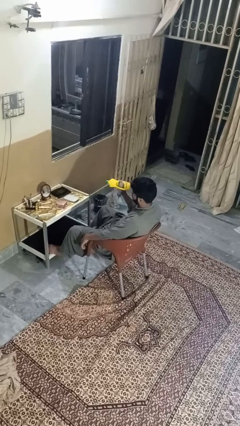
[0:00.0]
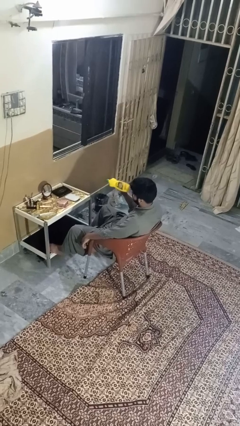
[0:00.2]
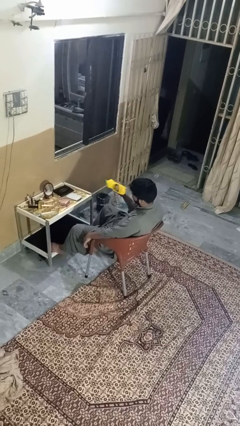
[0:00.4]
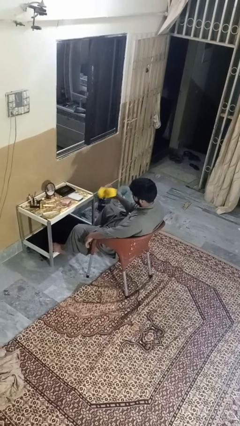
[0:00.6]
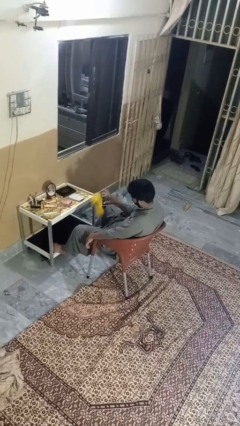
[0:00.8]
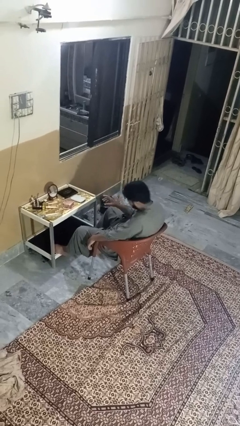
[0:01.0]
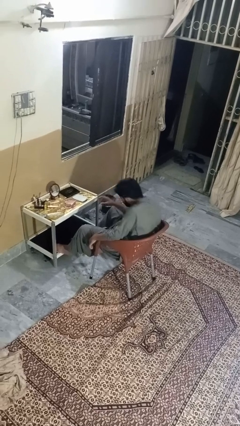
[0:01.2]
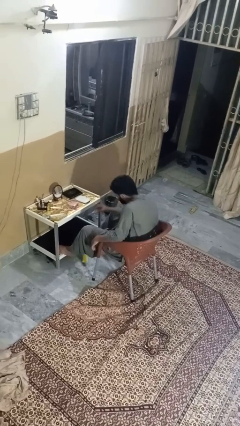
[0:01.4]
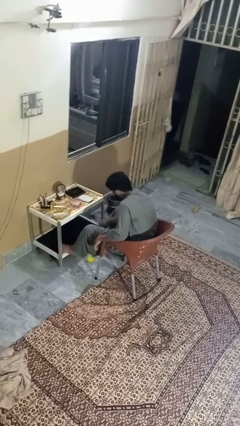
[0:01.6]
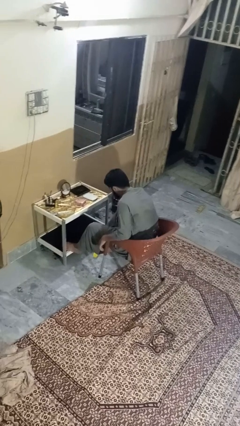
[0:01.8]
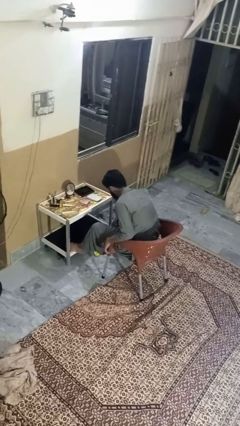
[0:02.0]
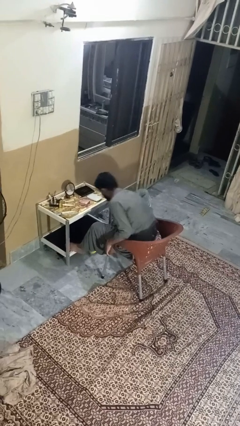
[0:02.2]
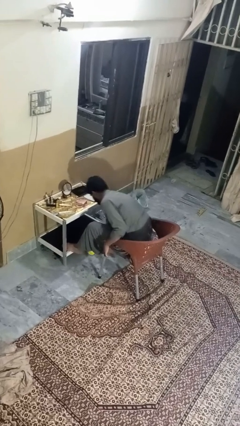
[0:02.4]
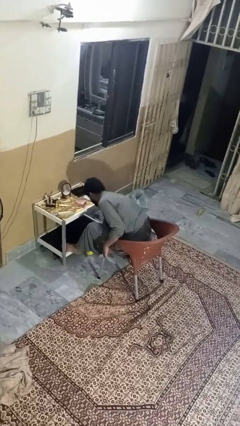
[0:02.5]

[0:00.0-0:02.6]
person throws object to ground

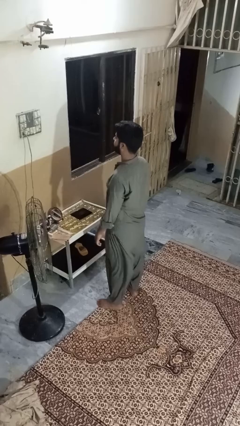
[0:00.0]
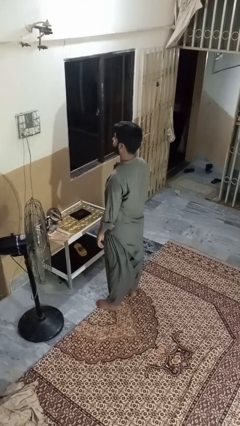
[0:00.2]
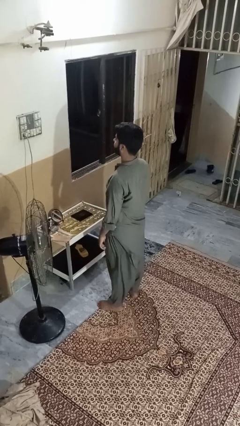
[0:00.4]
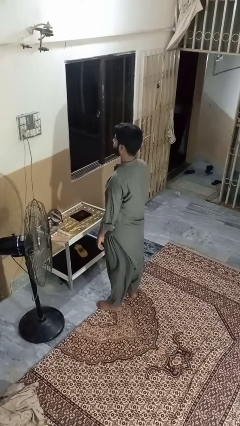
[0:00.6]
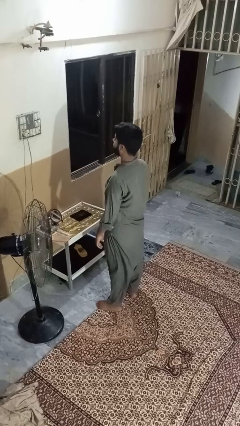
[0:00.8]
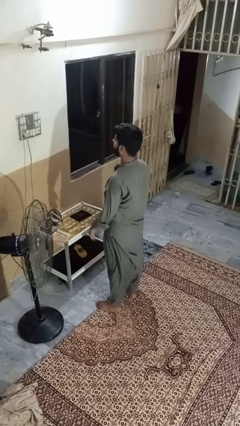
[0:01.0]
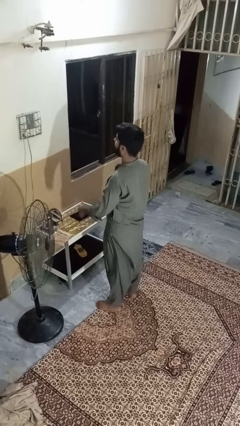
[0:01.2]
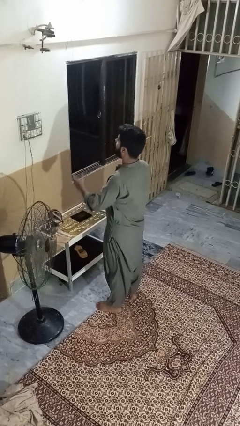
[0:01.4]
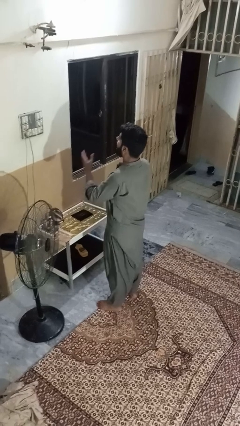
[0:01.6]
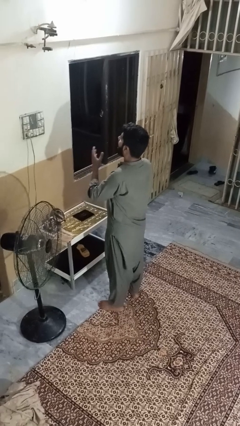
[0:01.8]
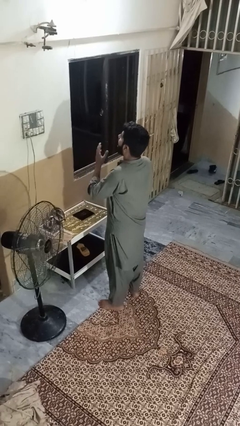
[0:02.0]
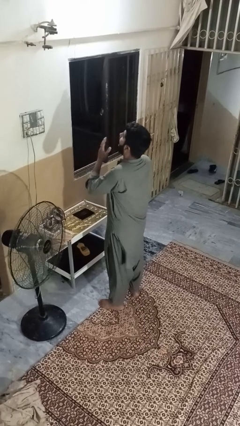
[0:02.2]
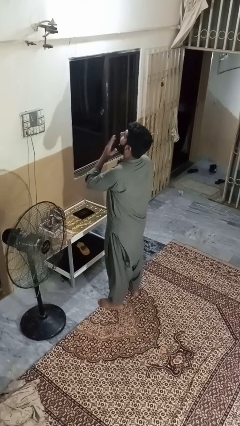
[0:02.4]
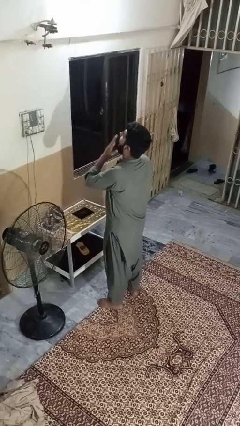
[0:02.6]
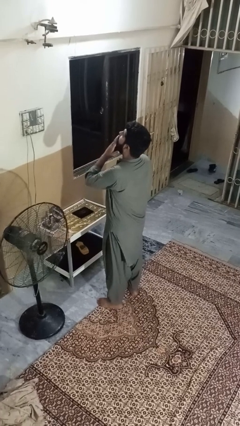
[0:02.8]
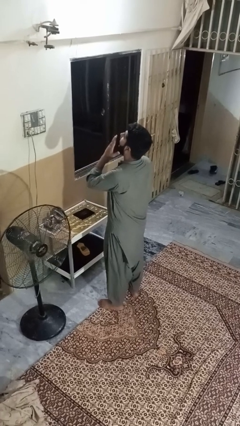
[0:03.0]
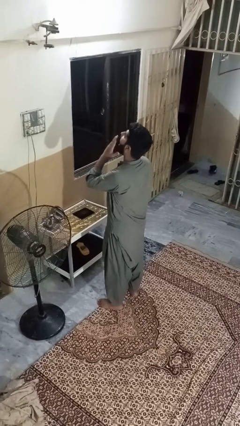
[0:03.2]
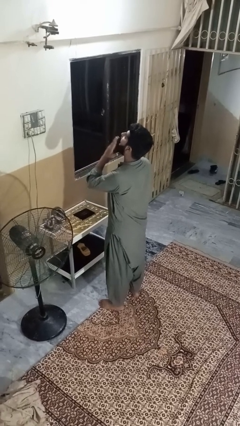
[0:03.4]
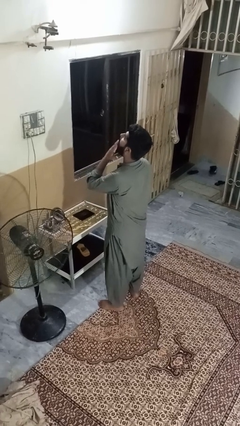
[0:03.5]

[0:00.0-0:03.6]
person yawns

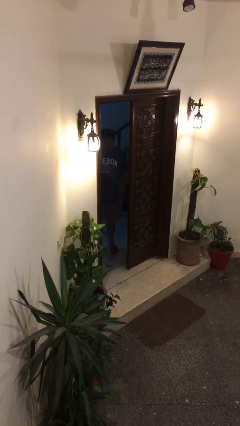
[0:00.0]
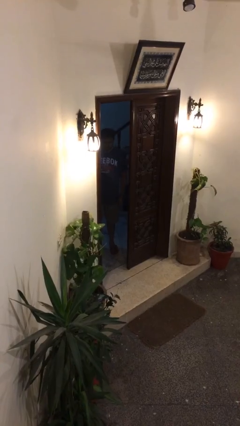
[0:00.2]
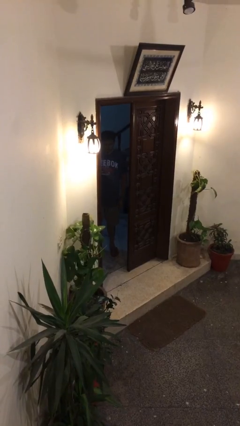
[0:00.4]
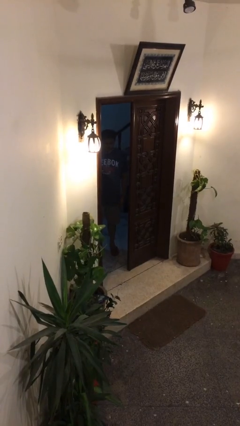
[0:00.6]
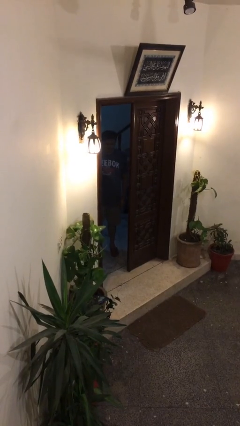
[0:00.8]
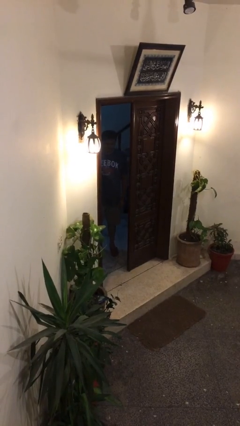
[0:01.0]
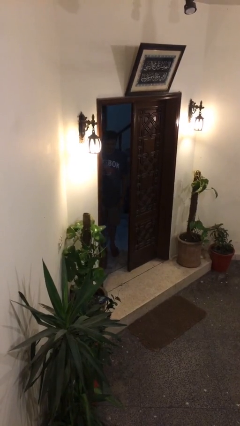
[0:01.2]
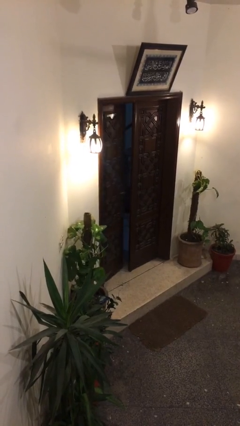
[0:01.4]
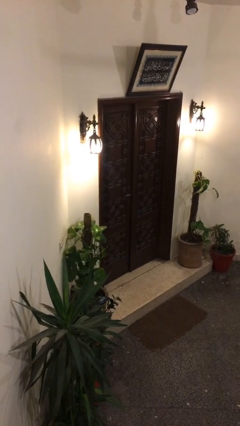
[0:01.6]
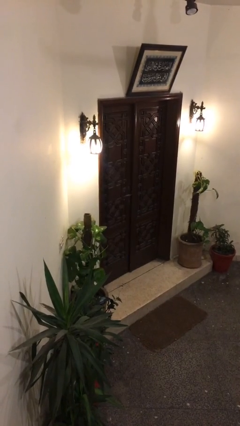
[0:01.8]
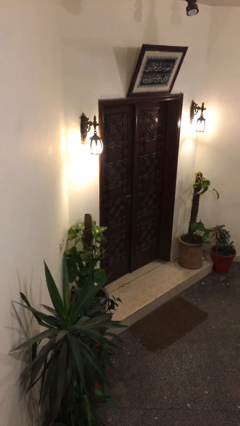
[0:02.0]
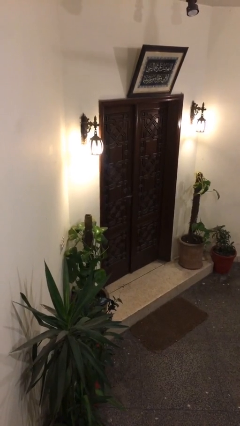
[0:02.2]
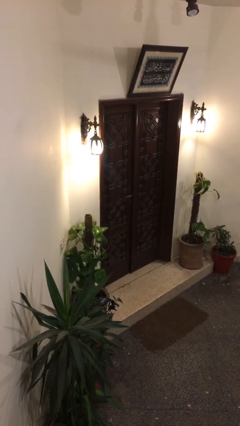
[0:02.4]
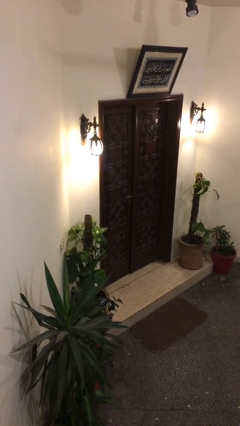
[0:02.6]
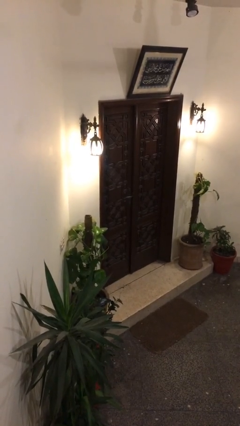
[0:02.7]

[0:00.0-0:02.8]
person closes facility door

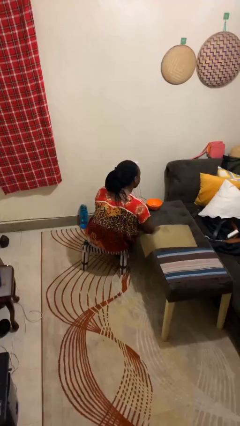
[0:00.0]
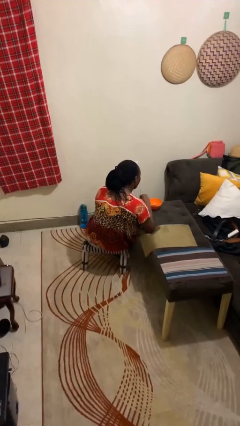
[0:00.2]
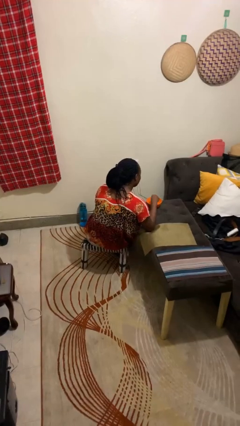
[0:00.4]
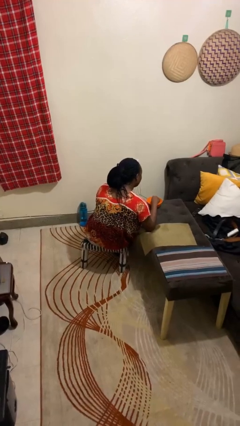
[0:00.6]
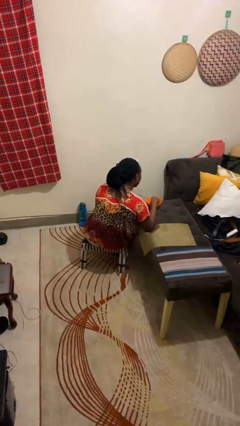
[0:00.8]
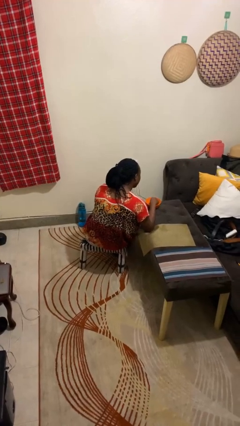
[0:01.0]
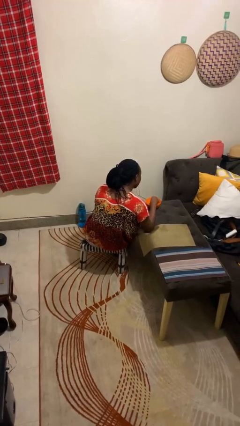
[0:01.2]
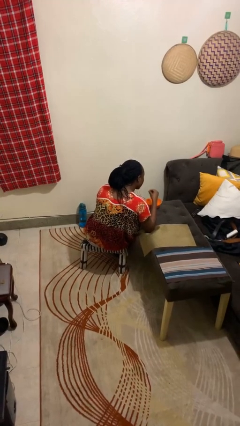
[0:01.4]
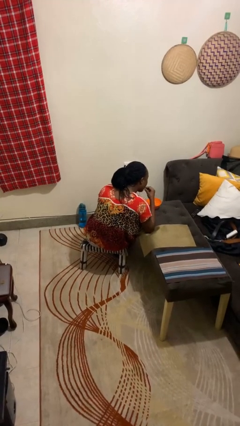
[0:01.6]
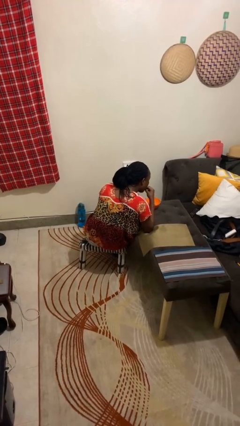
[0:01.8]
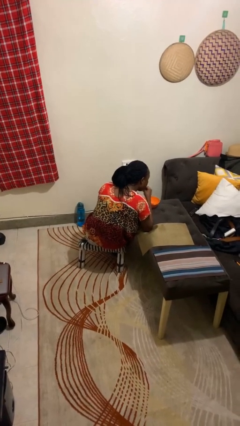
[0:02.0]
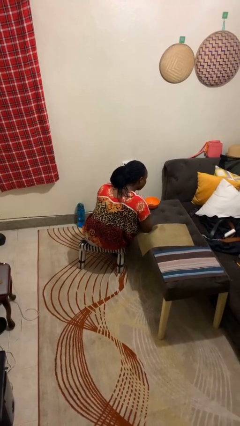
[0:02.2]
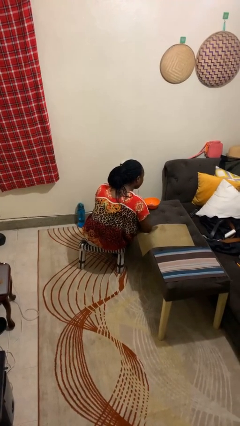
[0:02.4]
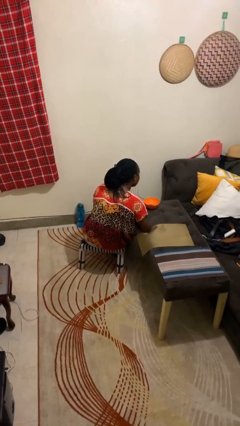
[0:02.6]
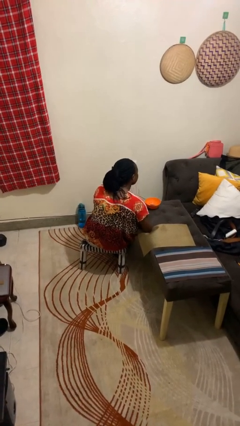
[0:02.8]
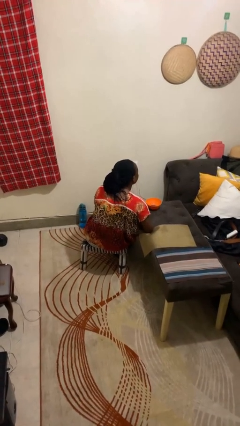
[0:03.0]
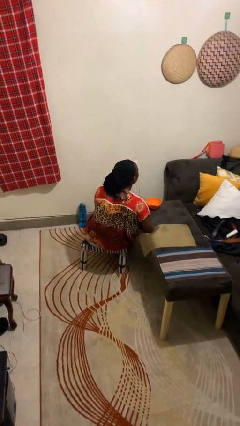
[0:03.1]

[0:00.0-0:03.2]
person eats with hands

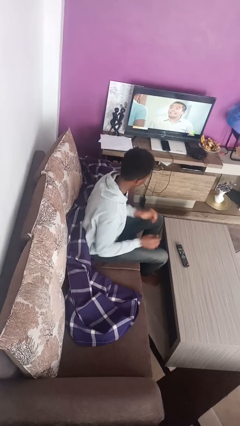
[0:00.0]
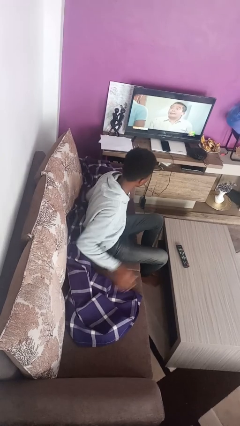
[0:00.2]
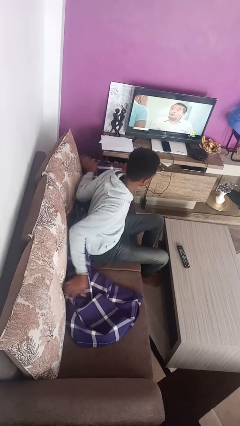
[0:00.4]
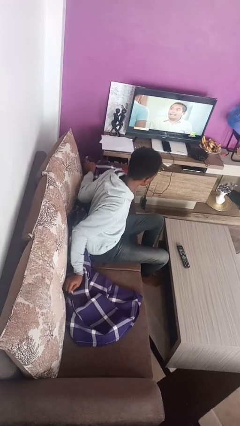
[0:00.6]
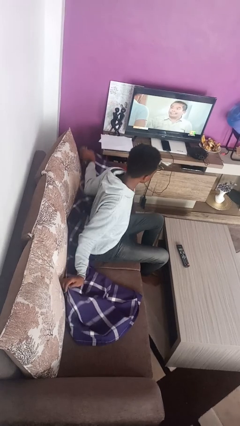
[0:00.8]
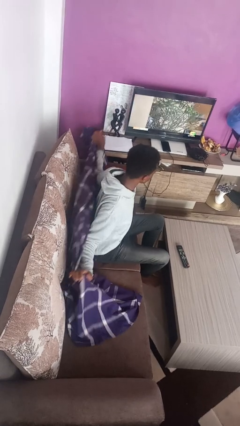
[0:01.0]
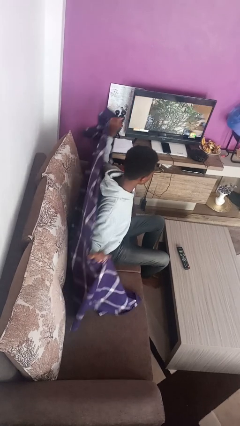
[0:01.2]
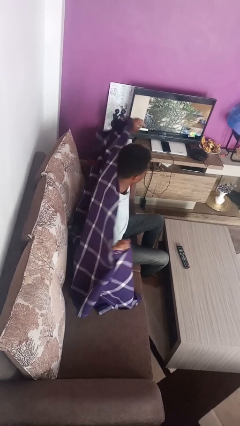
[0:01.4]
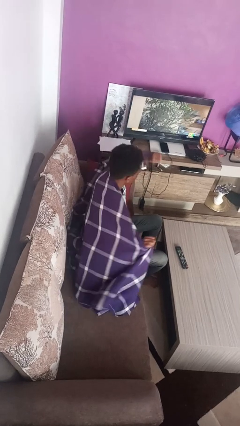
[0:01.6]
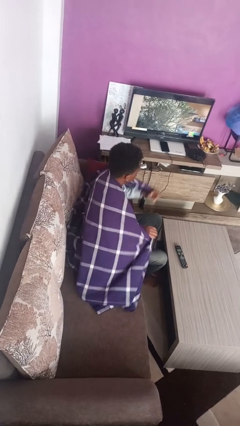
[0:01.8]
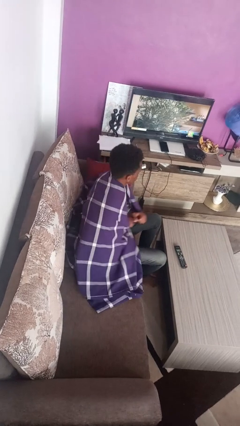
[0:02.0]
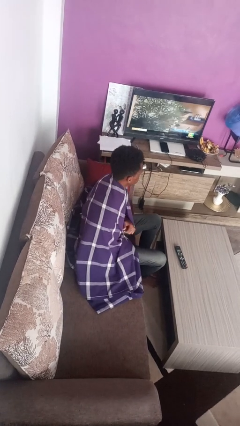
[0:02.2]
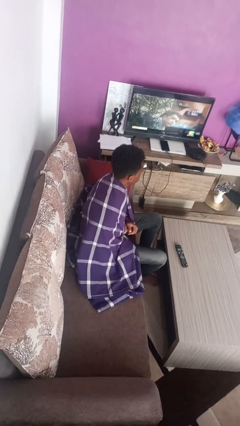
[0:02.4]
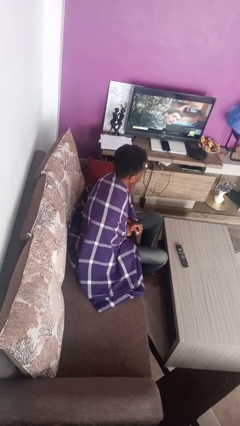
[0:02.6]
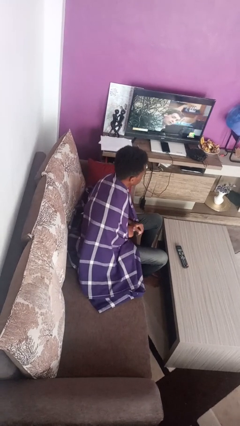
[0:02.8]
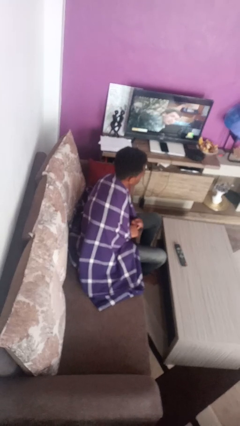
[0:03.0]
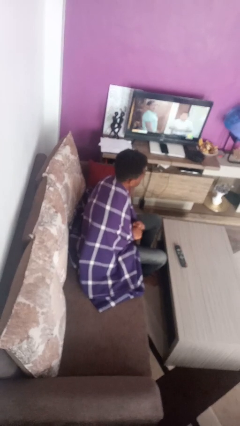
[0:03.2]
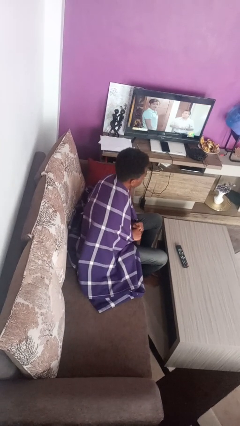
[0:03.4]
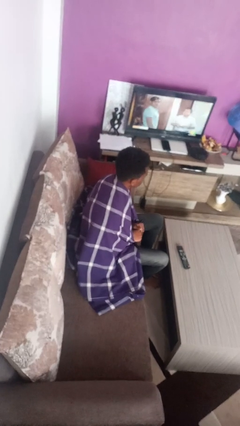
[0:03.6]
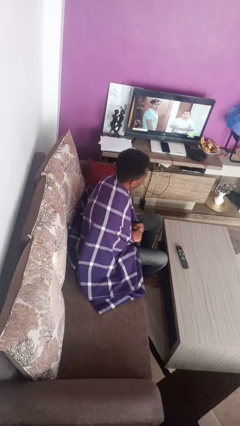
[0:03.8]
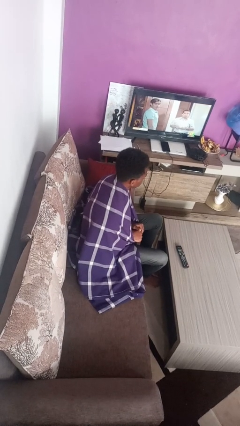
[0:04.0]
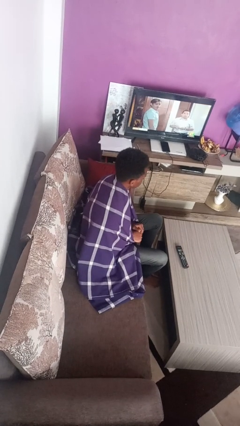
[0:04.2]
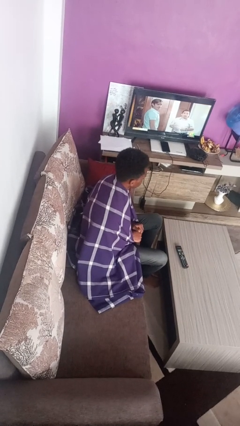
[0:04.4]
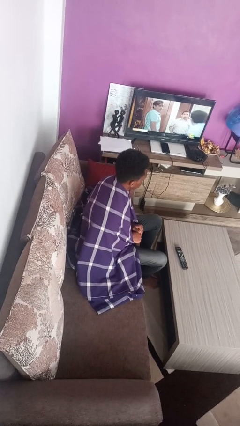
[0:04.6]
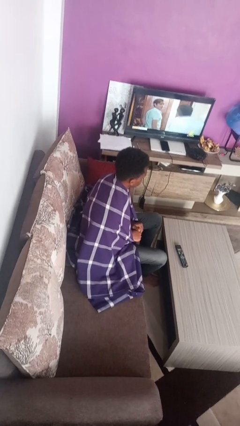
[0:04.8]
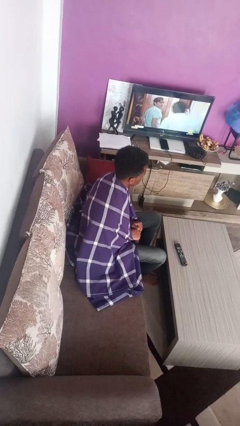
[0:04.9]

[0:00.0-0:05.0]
person covers with blanket

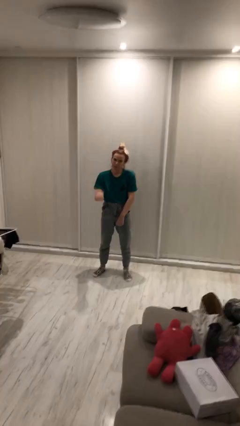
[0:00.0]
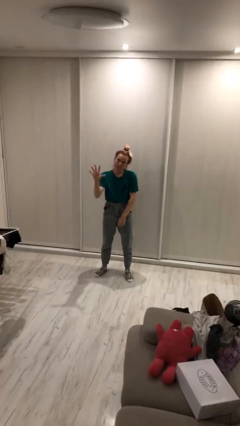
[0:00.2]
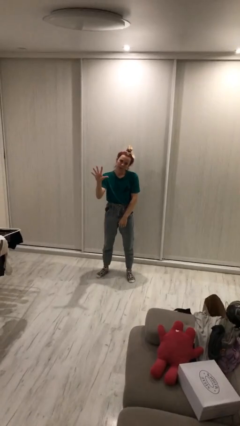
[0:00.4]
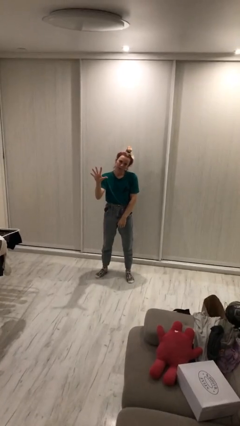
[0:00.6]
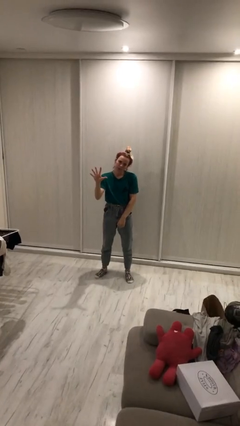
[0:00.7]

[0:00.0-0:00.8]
person gestures number five
